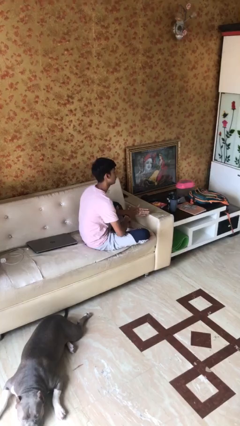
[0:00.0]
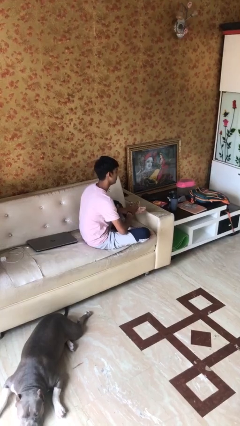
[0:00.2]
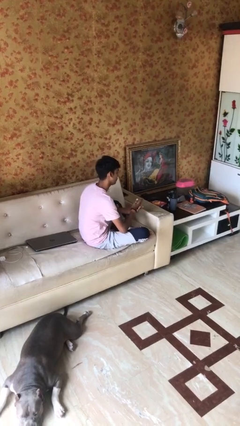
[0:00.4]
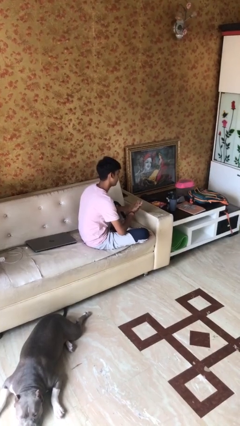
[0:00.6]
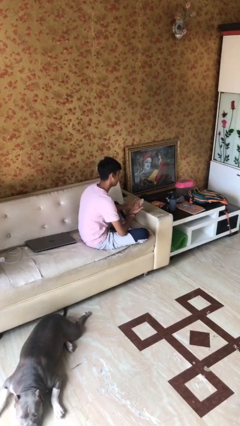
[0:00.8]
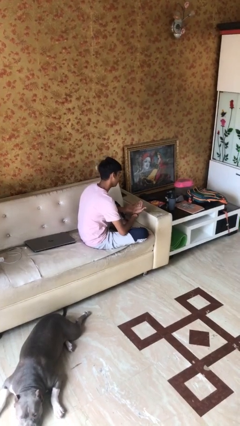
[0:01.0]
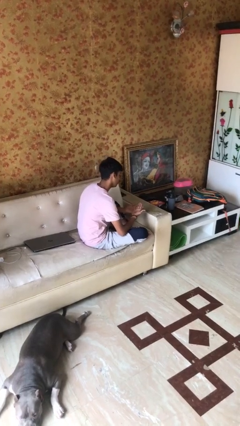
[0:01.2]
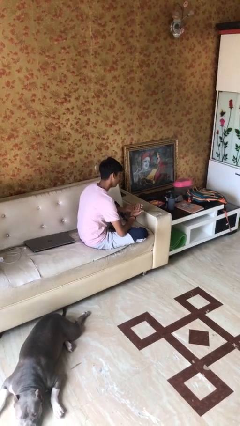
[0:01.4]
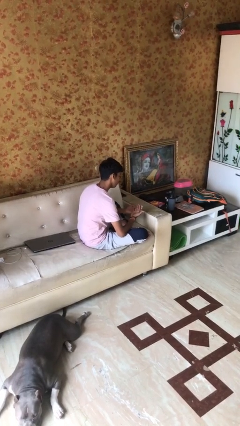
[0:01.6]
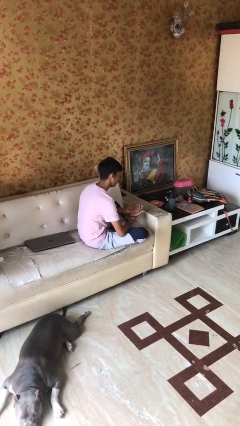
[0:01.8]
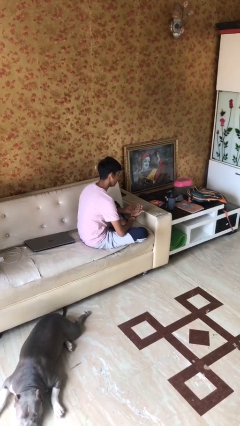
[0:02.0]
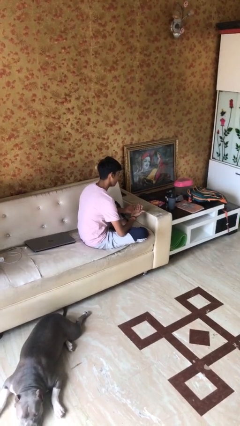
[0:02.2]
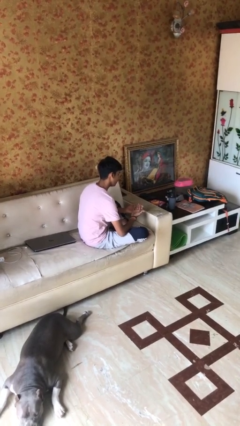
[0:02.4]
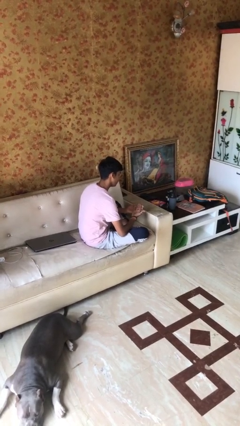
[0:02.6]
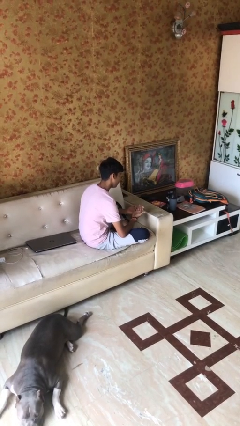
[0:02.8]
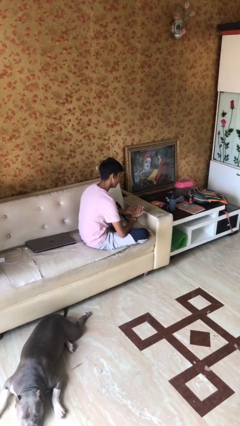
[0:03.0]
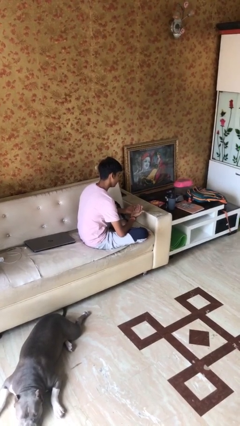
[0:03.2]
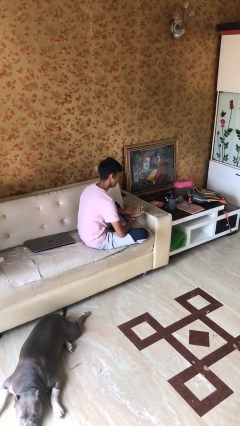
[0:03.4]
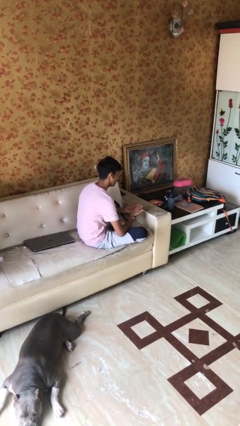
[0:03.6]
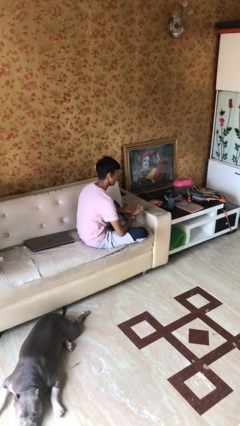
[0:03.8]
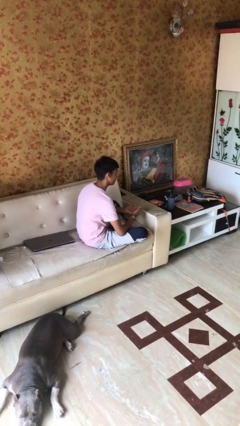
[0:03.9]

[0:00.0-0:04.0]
person looks at hands in lap

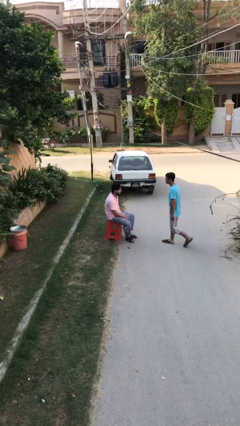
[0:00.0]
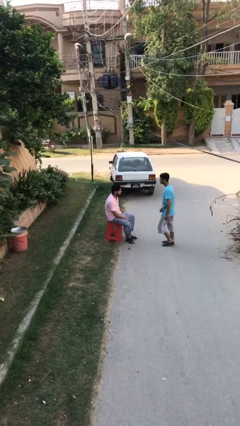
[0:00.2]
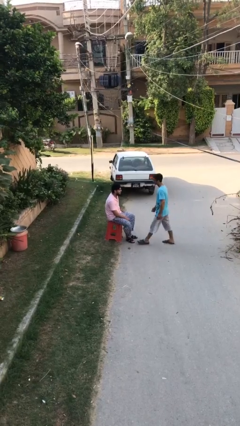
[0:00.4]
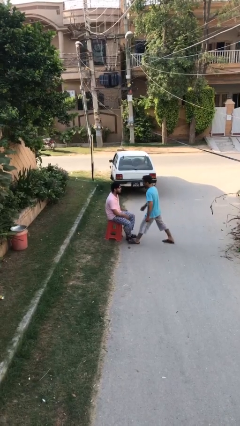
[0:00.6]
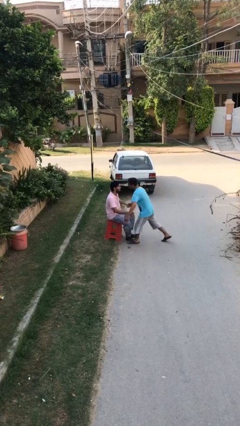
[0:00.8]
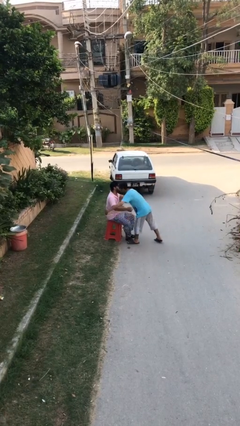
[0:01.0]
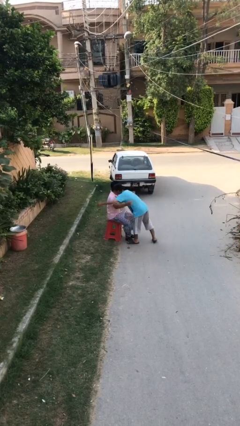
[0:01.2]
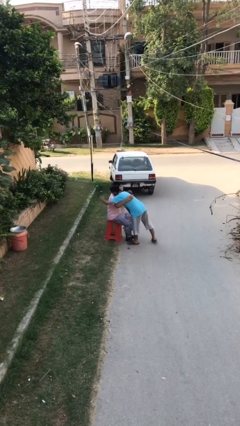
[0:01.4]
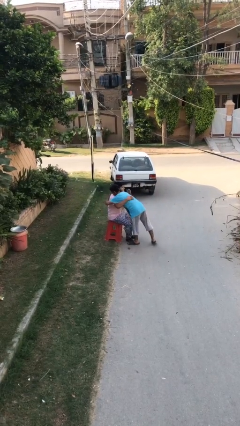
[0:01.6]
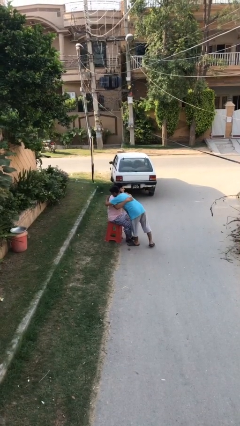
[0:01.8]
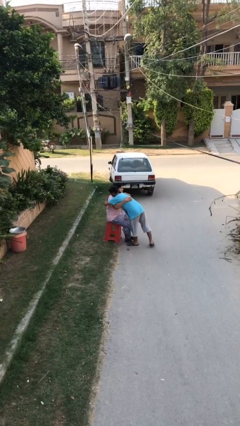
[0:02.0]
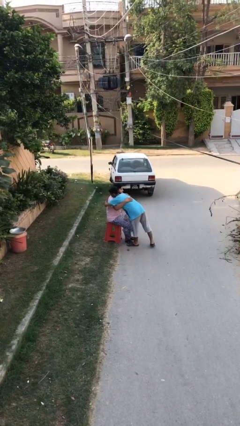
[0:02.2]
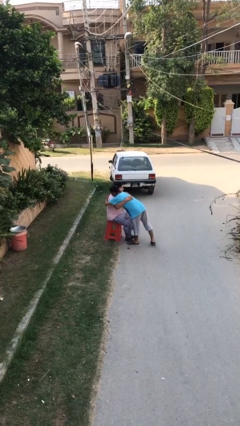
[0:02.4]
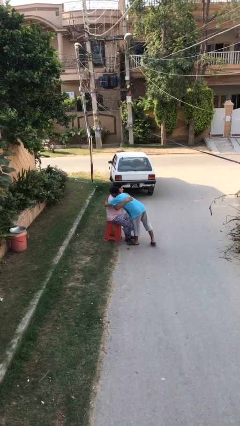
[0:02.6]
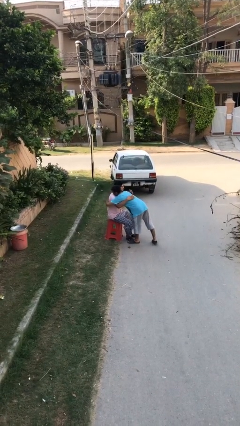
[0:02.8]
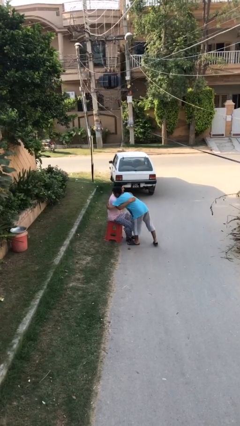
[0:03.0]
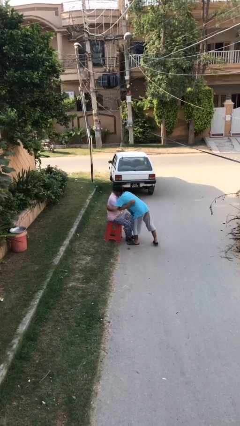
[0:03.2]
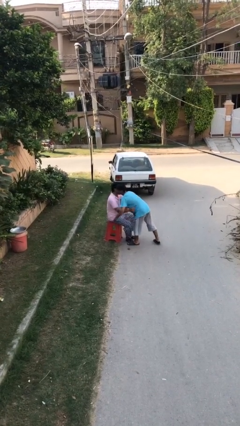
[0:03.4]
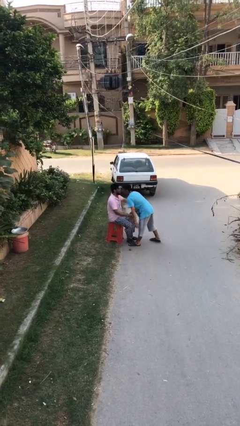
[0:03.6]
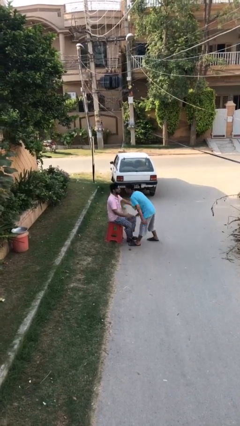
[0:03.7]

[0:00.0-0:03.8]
person embraces person

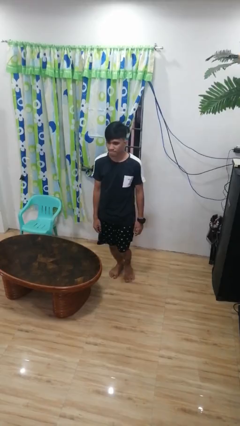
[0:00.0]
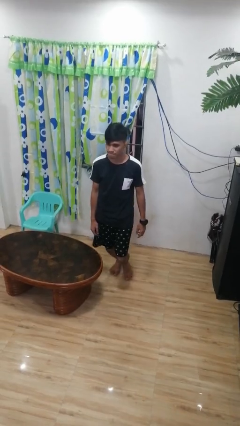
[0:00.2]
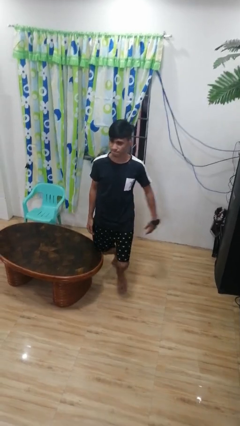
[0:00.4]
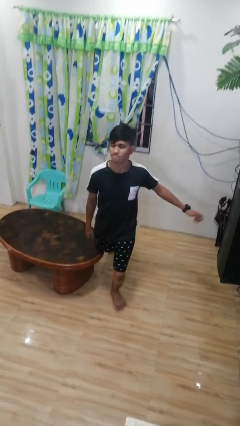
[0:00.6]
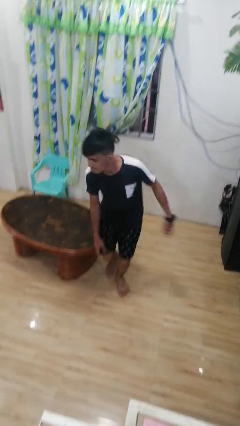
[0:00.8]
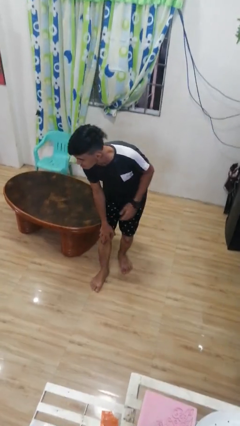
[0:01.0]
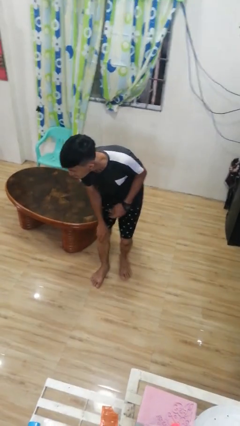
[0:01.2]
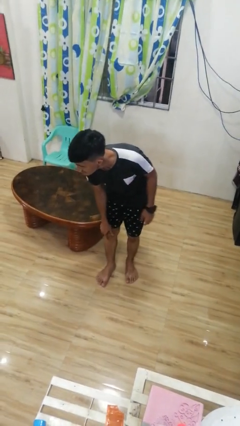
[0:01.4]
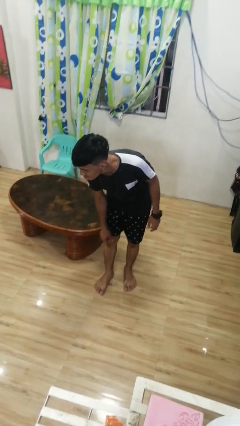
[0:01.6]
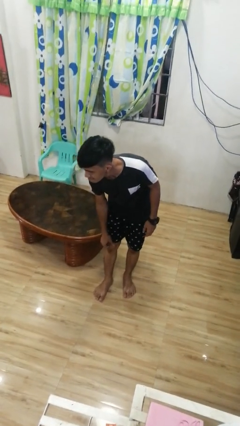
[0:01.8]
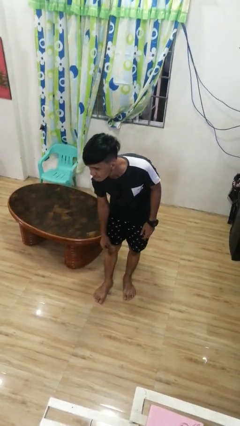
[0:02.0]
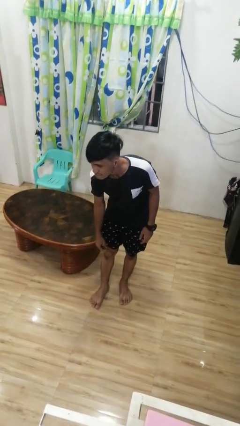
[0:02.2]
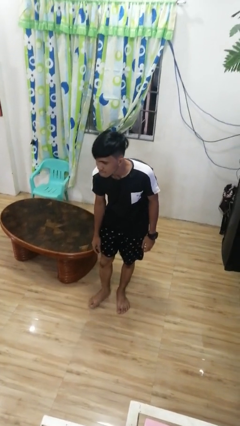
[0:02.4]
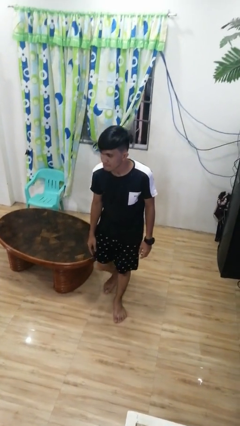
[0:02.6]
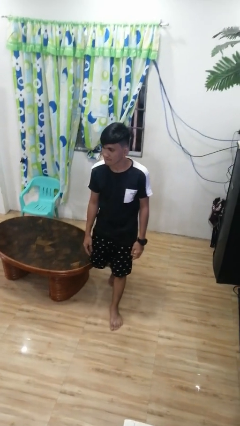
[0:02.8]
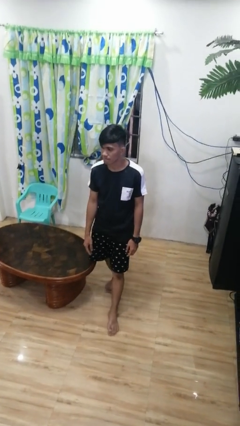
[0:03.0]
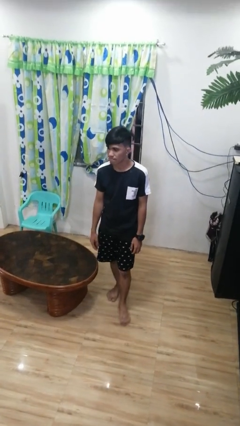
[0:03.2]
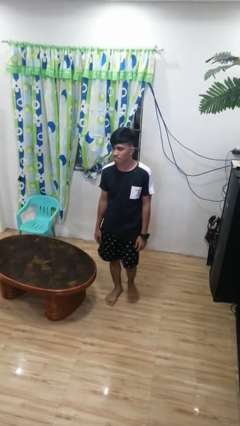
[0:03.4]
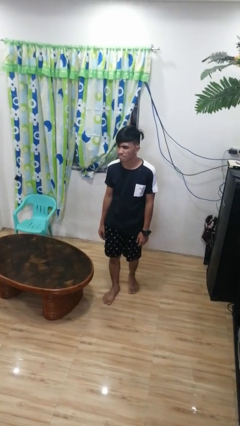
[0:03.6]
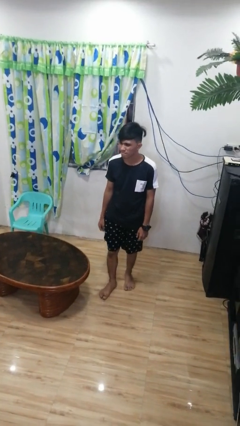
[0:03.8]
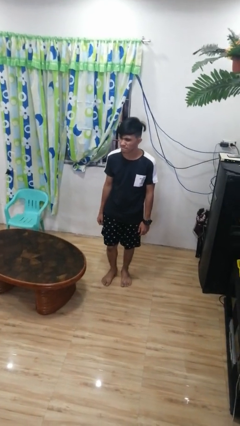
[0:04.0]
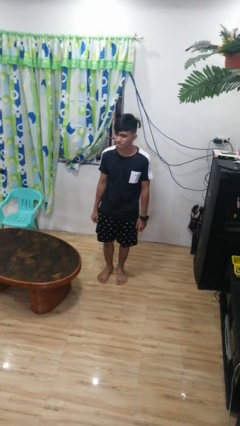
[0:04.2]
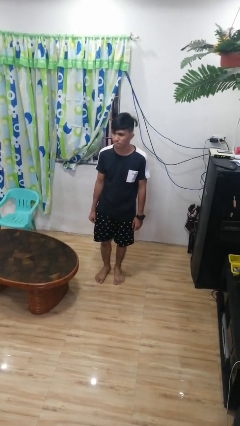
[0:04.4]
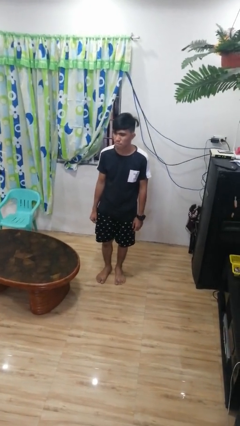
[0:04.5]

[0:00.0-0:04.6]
person bumps into table

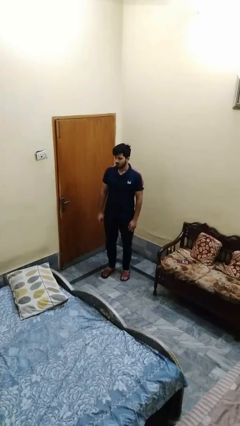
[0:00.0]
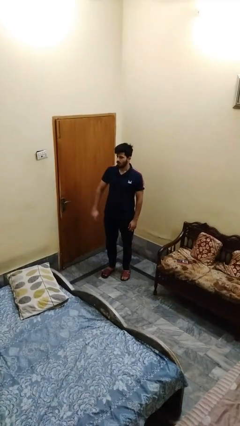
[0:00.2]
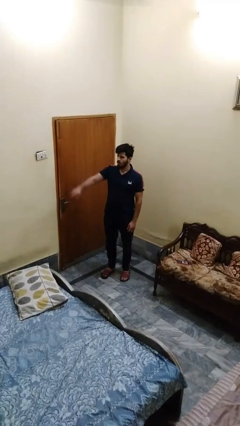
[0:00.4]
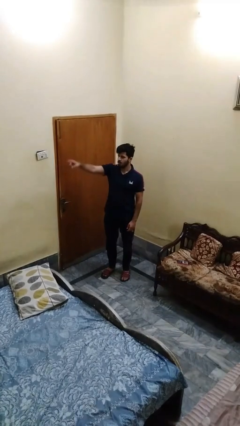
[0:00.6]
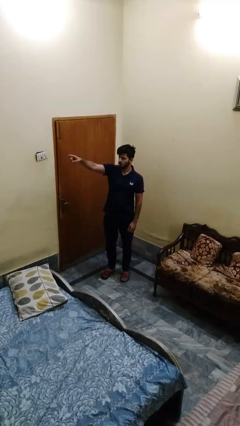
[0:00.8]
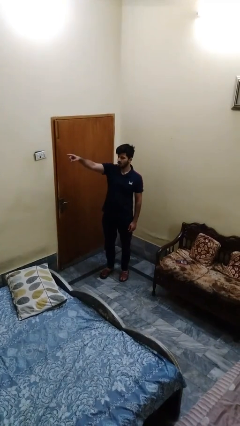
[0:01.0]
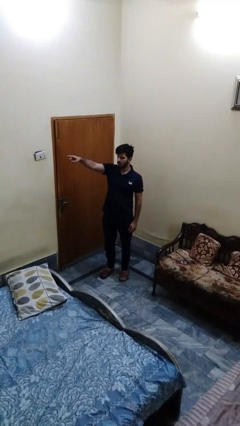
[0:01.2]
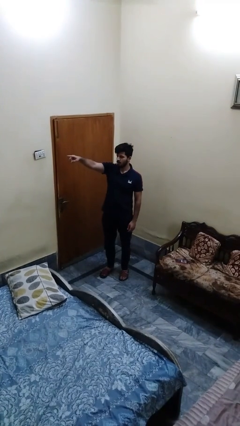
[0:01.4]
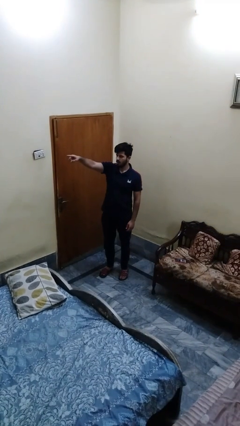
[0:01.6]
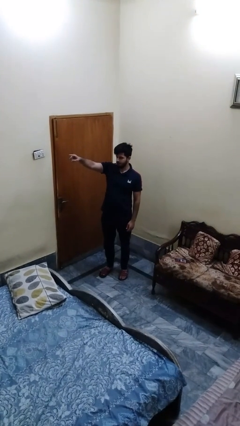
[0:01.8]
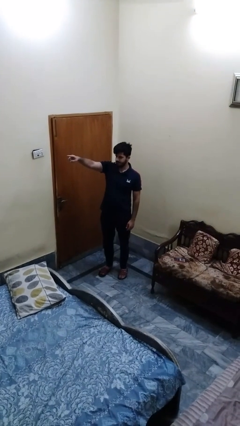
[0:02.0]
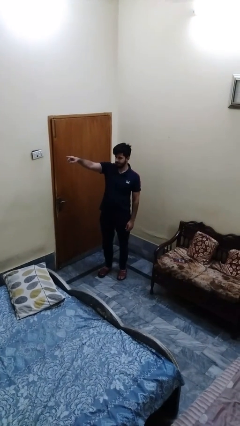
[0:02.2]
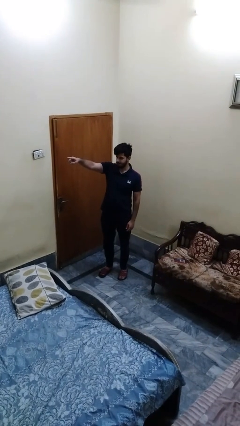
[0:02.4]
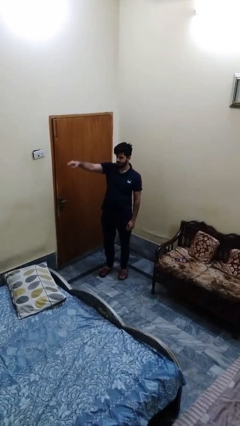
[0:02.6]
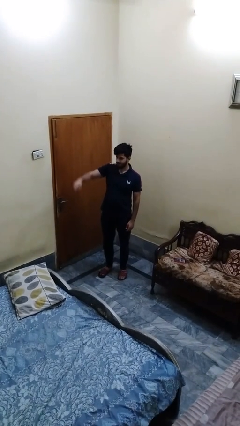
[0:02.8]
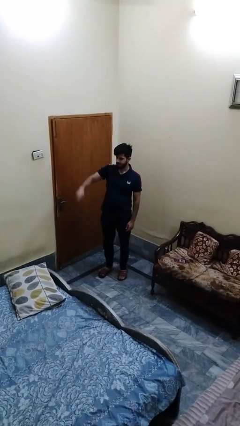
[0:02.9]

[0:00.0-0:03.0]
person points at person

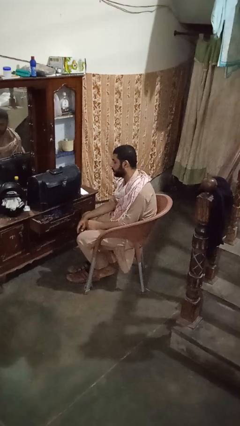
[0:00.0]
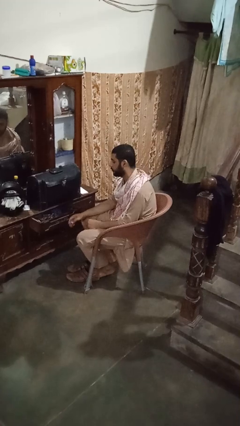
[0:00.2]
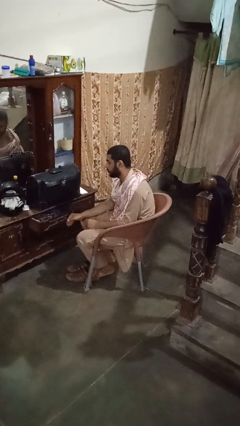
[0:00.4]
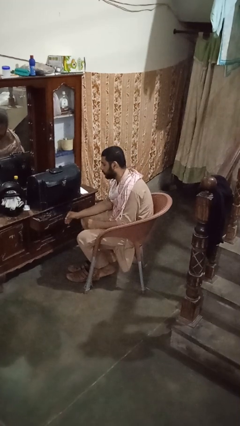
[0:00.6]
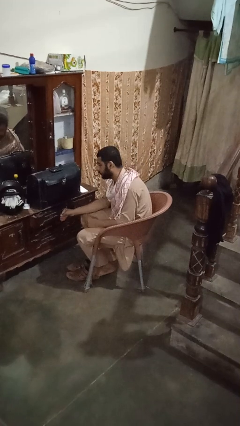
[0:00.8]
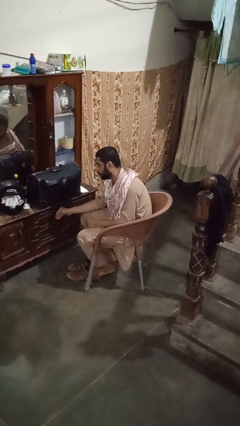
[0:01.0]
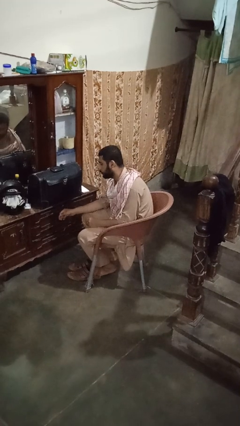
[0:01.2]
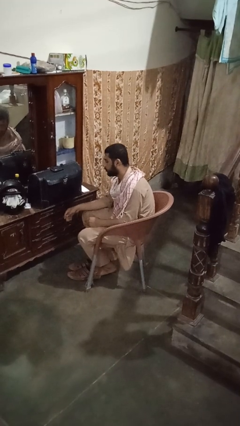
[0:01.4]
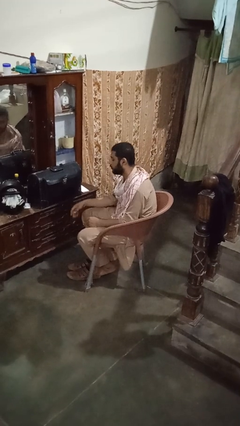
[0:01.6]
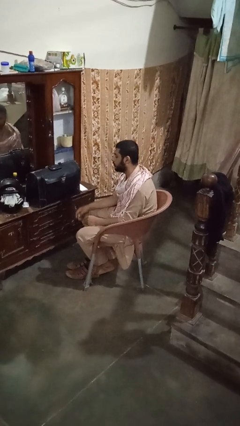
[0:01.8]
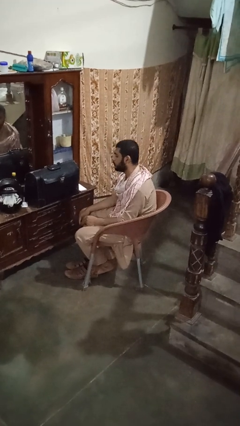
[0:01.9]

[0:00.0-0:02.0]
person closes dresser drawer

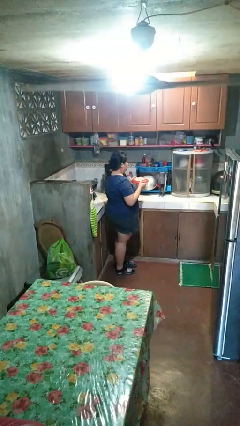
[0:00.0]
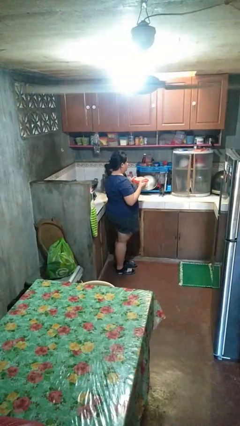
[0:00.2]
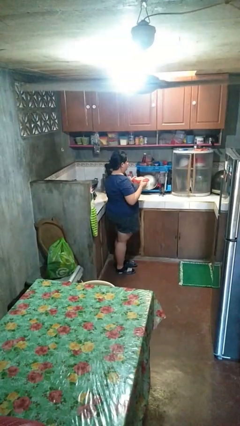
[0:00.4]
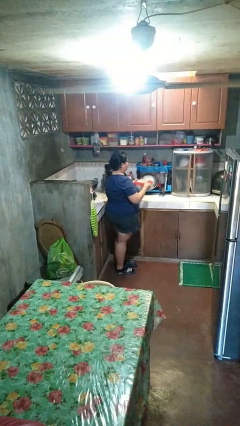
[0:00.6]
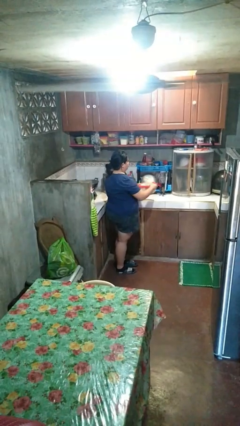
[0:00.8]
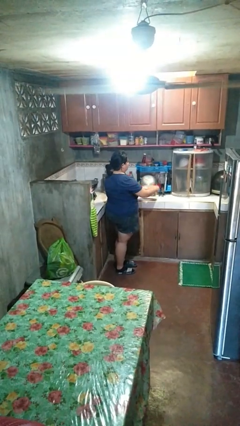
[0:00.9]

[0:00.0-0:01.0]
person puts down object on countertop
